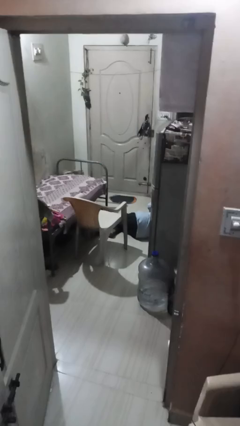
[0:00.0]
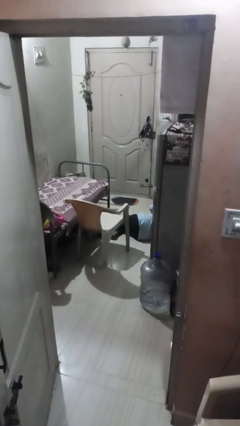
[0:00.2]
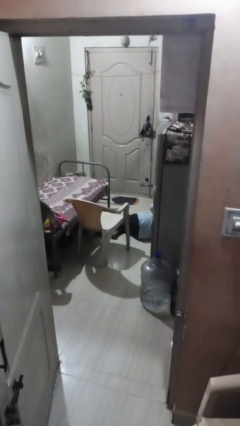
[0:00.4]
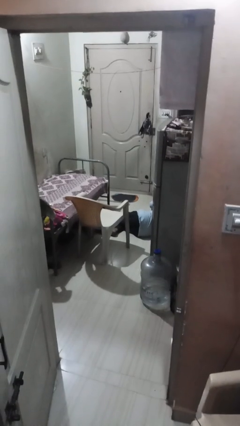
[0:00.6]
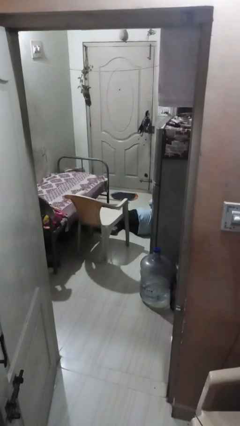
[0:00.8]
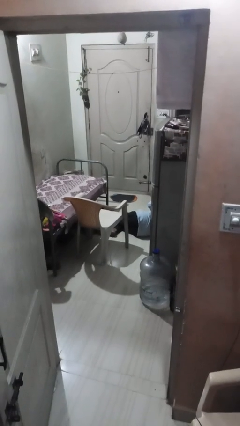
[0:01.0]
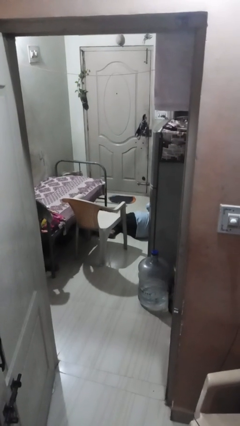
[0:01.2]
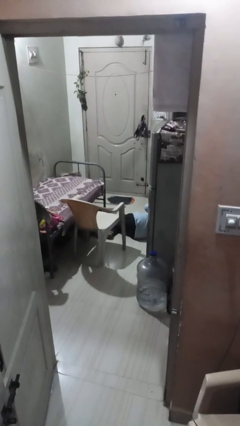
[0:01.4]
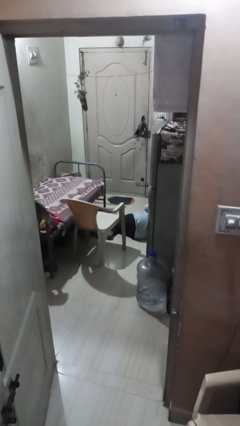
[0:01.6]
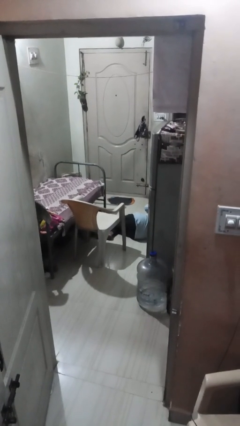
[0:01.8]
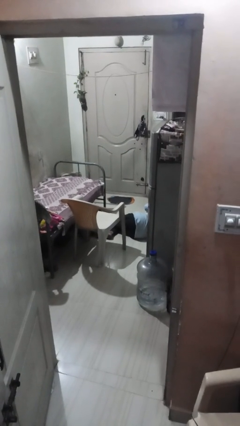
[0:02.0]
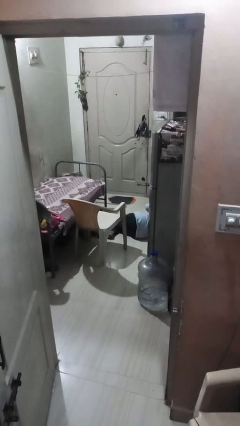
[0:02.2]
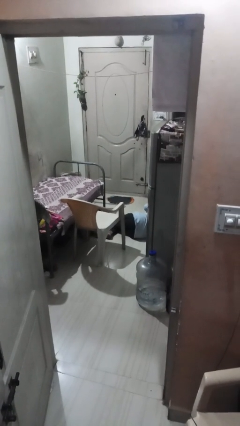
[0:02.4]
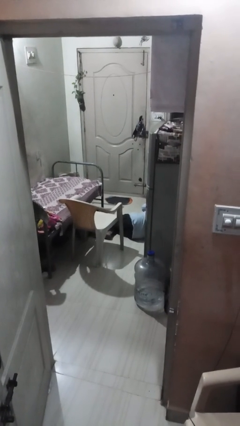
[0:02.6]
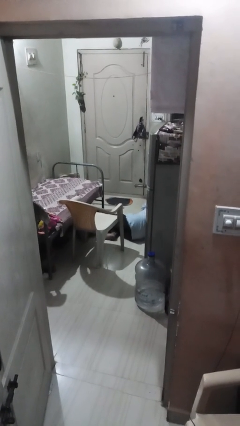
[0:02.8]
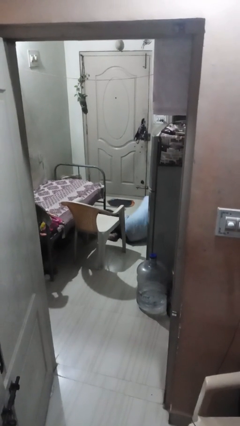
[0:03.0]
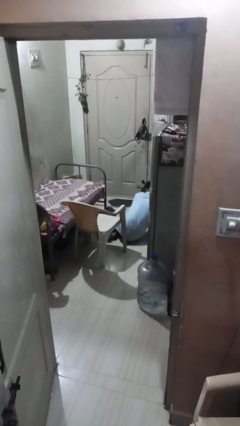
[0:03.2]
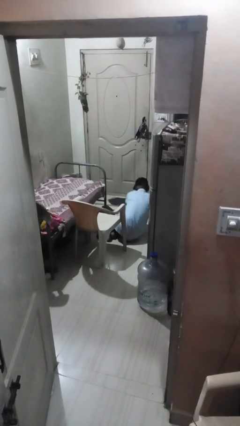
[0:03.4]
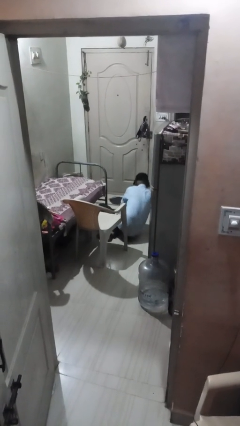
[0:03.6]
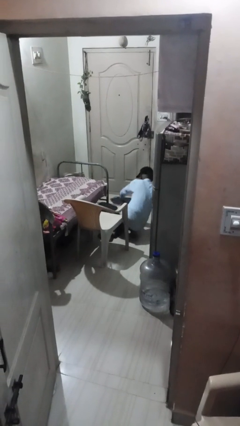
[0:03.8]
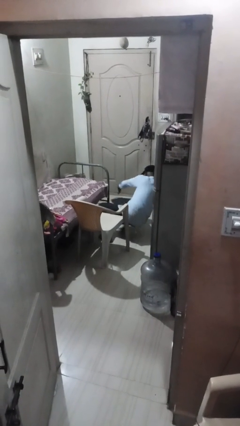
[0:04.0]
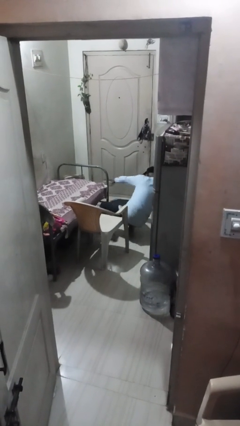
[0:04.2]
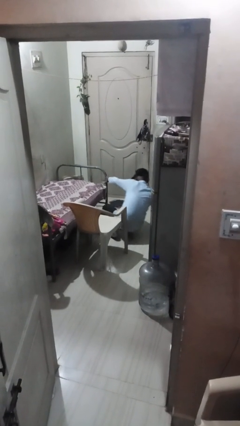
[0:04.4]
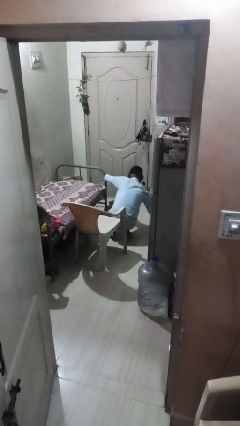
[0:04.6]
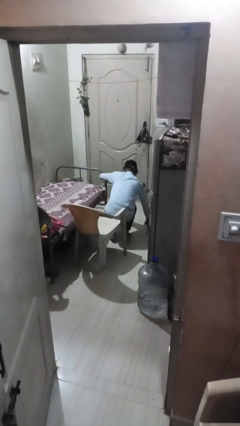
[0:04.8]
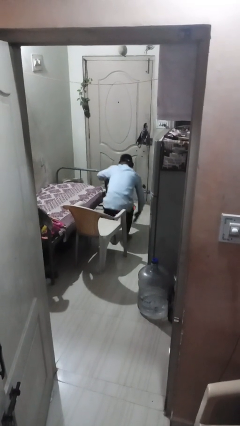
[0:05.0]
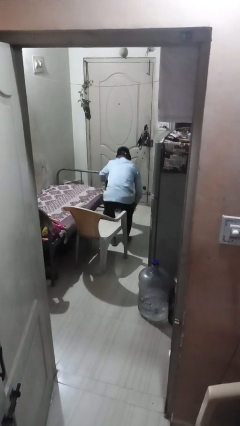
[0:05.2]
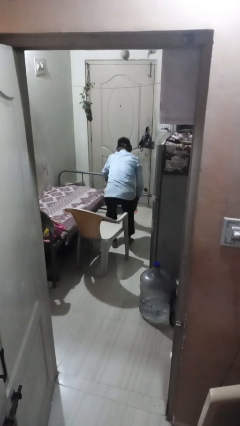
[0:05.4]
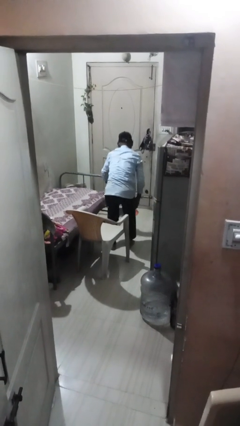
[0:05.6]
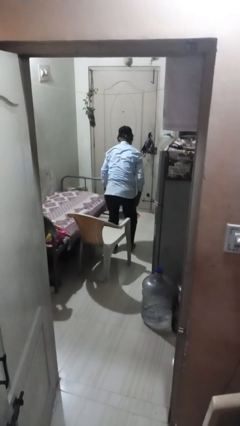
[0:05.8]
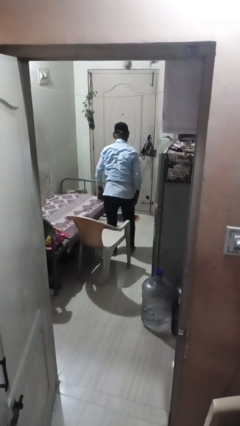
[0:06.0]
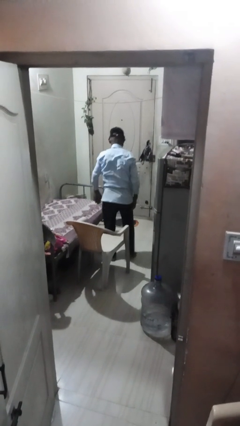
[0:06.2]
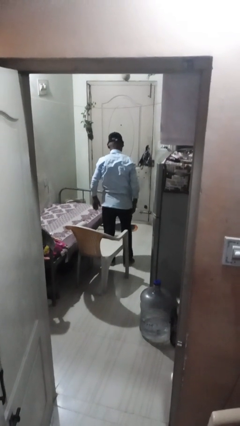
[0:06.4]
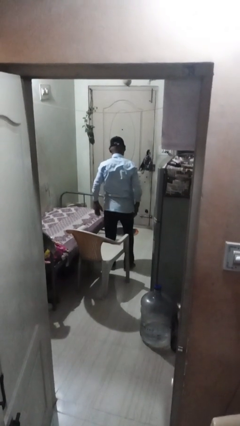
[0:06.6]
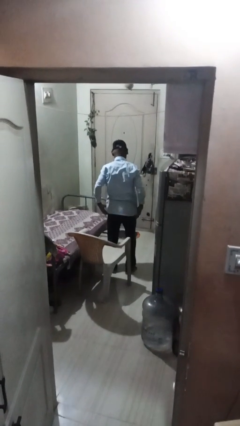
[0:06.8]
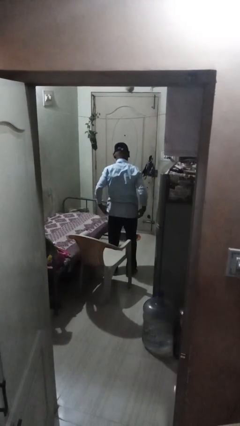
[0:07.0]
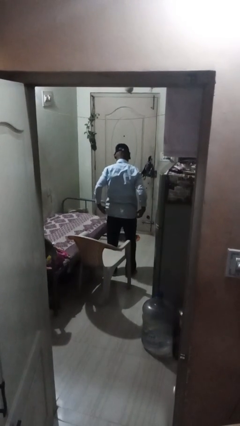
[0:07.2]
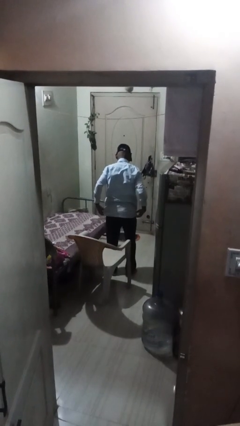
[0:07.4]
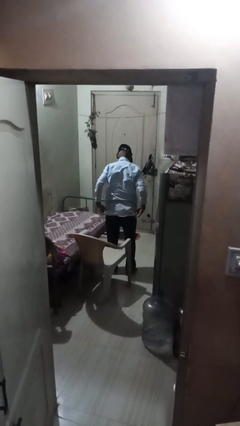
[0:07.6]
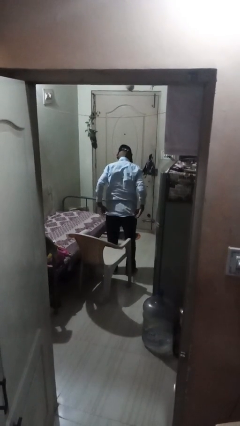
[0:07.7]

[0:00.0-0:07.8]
person stands up from floor

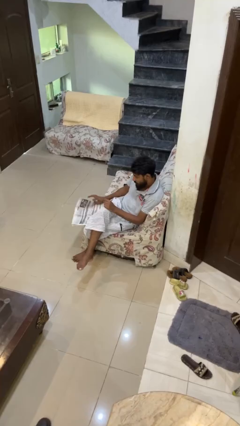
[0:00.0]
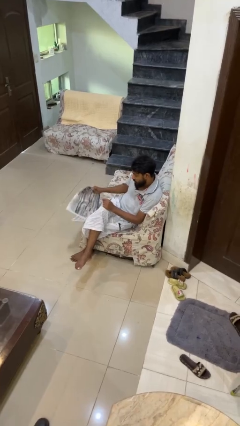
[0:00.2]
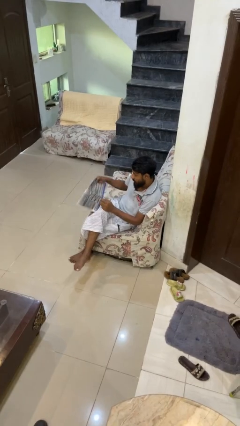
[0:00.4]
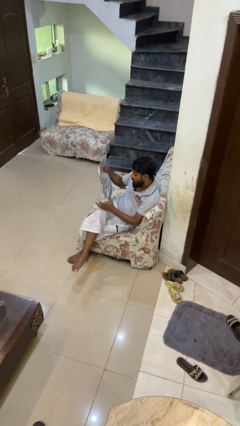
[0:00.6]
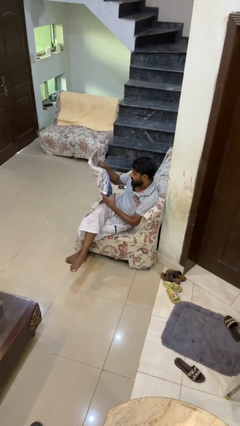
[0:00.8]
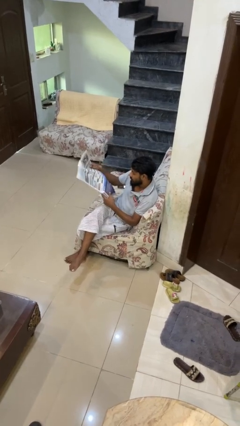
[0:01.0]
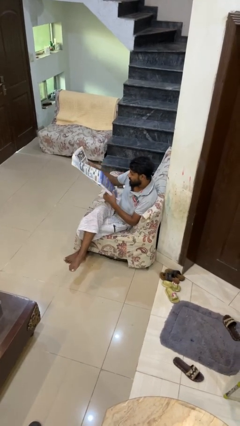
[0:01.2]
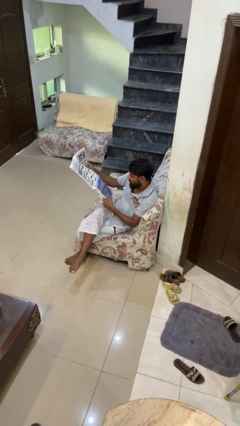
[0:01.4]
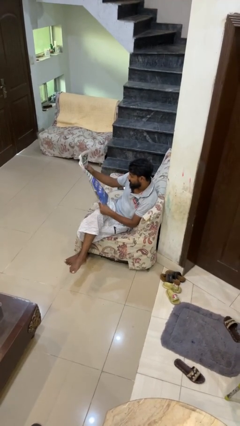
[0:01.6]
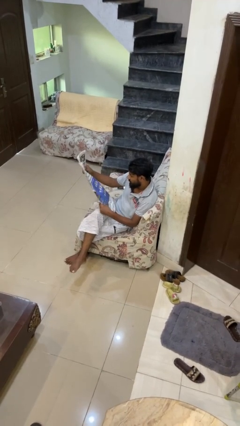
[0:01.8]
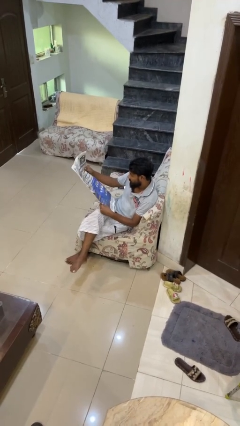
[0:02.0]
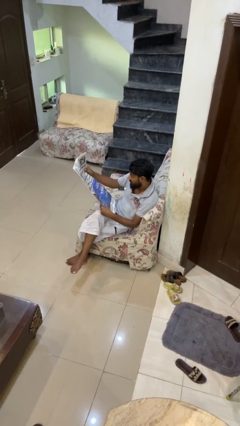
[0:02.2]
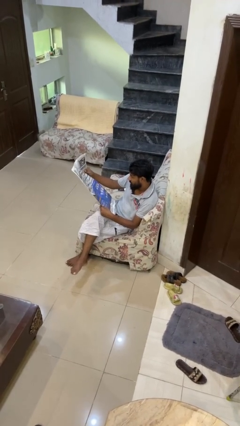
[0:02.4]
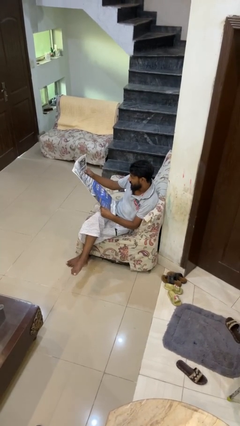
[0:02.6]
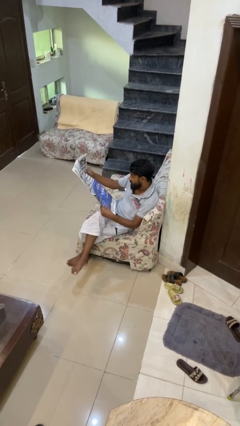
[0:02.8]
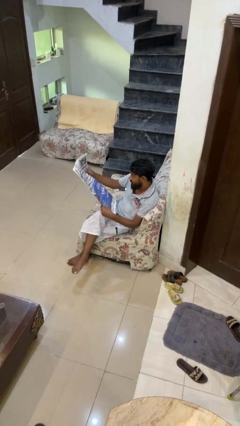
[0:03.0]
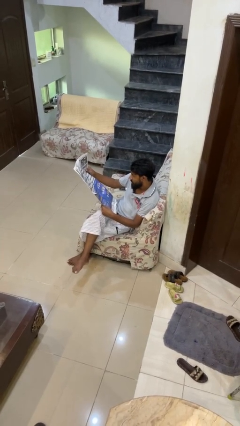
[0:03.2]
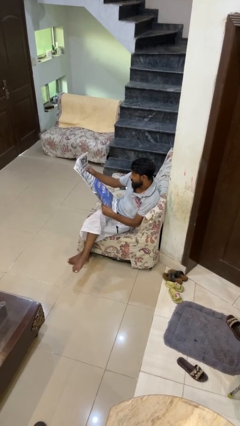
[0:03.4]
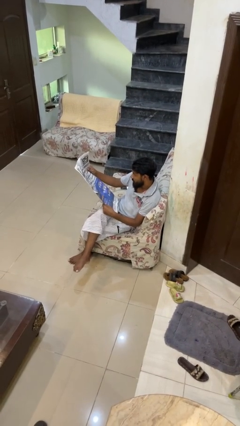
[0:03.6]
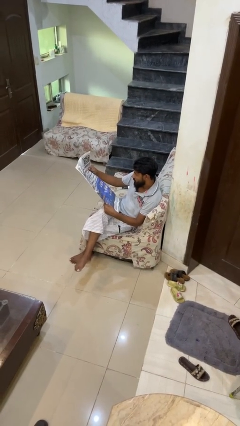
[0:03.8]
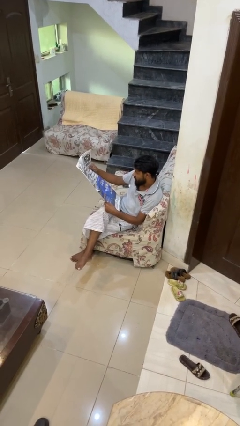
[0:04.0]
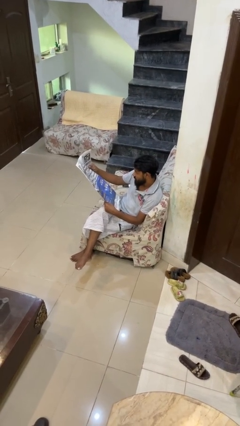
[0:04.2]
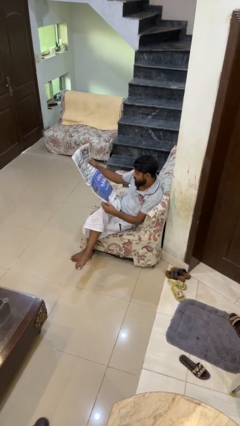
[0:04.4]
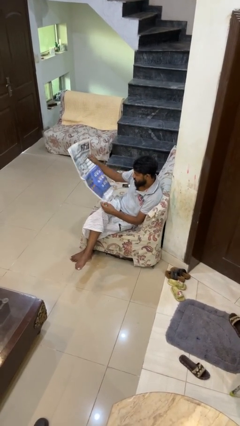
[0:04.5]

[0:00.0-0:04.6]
person reads newspaper

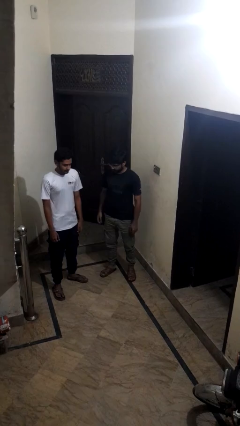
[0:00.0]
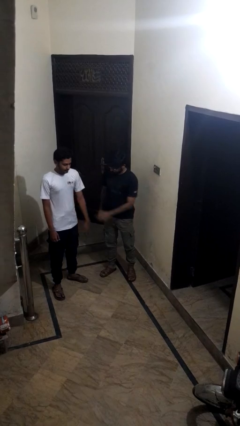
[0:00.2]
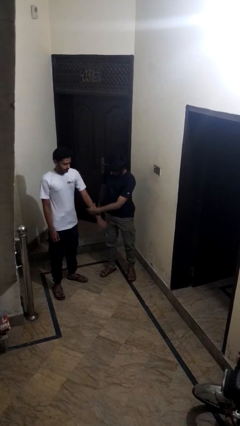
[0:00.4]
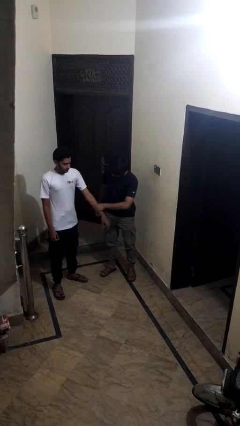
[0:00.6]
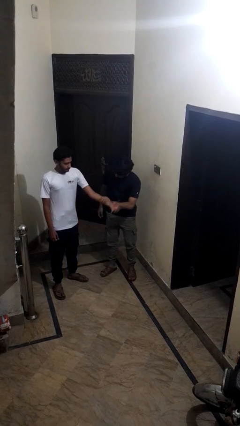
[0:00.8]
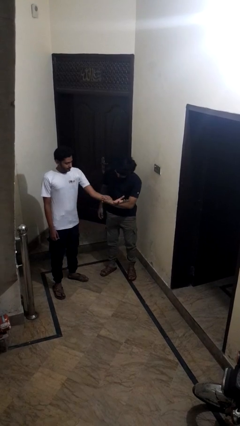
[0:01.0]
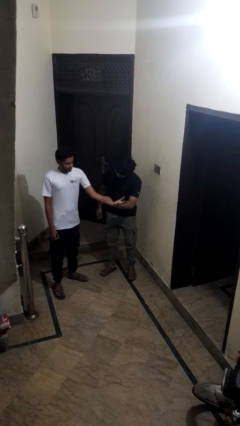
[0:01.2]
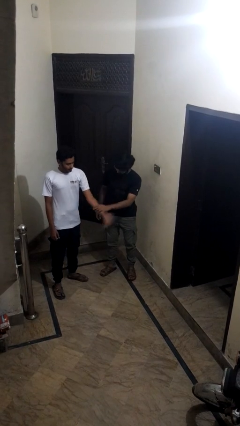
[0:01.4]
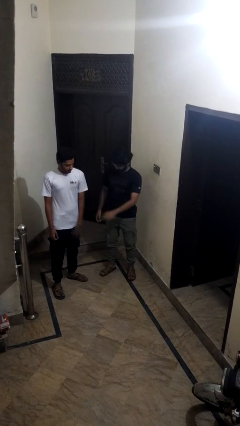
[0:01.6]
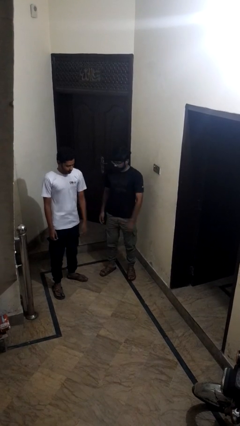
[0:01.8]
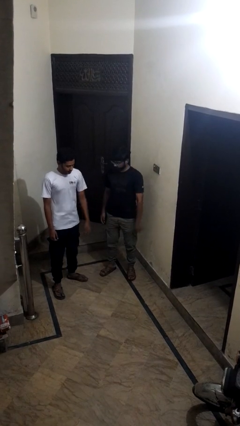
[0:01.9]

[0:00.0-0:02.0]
person grabs person by forearm

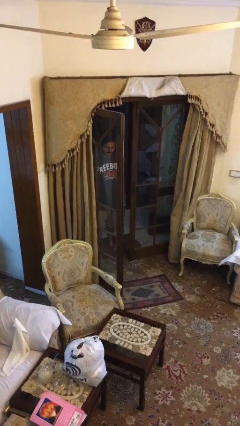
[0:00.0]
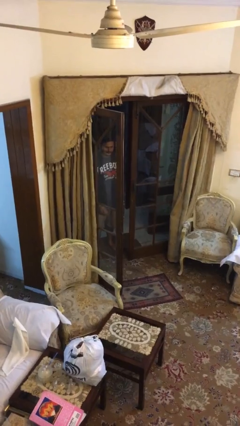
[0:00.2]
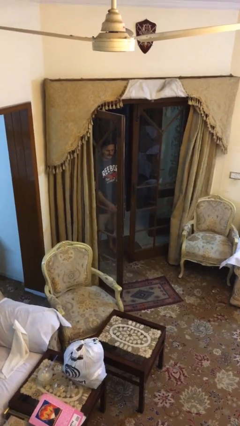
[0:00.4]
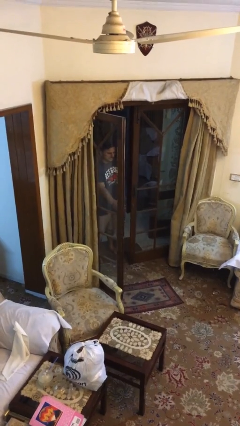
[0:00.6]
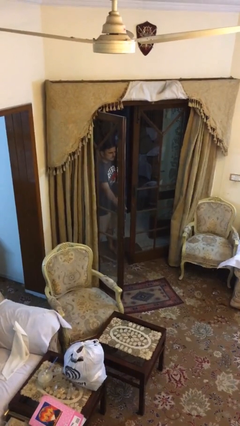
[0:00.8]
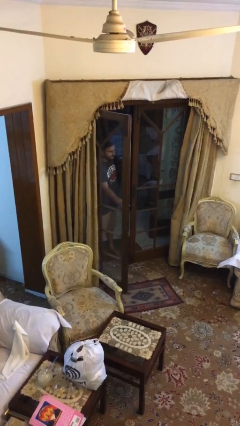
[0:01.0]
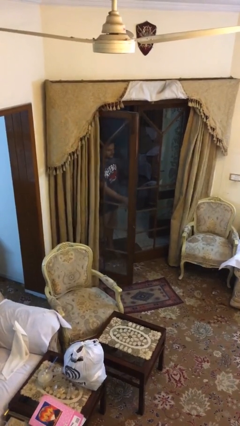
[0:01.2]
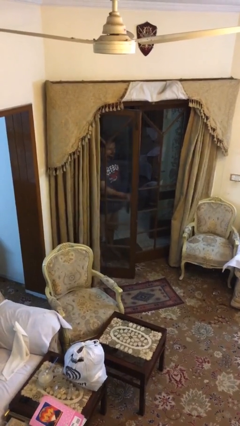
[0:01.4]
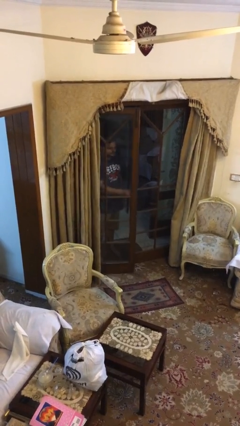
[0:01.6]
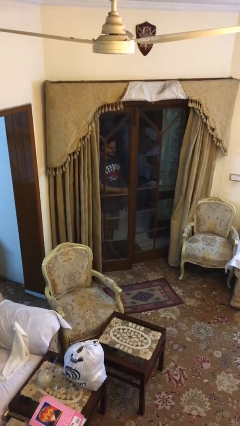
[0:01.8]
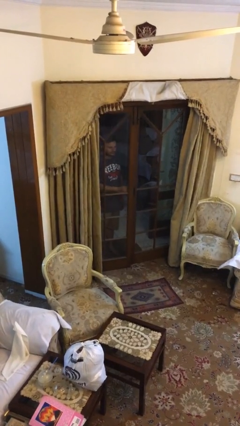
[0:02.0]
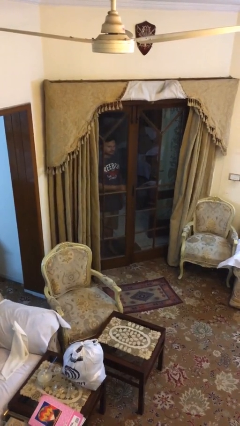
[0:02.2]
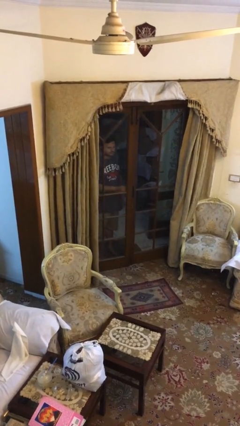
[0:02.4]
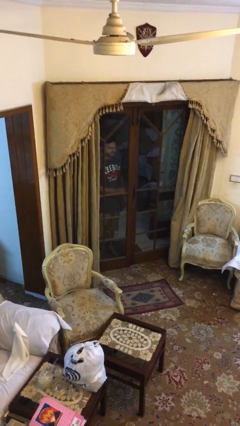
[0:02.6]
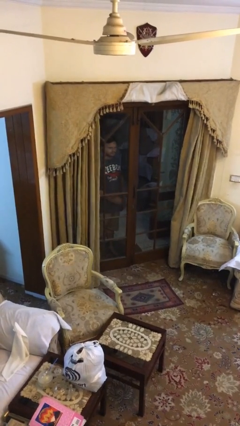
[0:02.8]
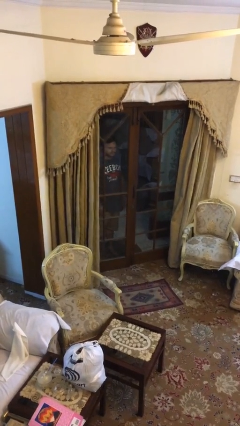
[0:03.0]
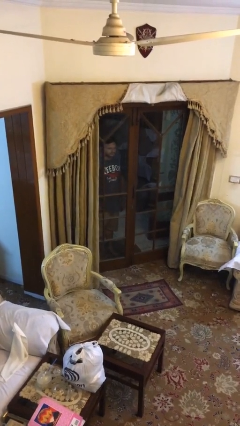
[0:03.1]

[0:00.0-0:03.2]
person closes facility door
